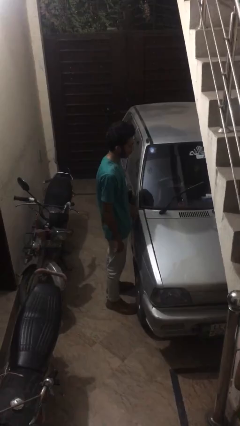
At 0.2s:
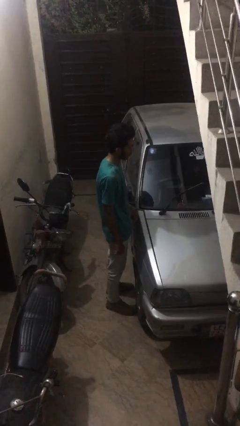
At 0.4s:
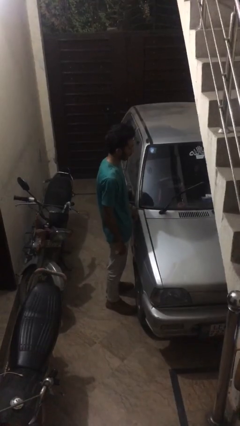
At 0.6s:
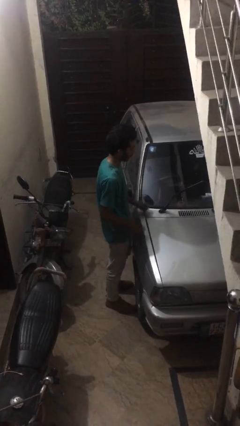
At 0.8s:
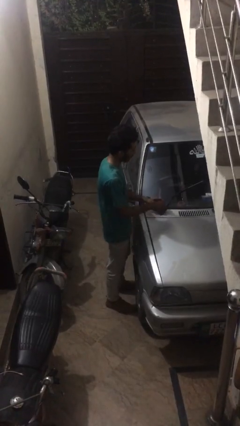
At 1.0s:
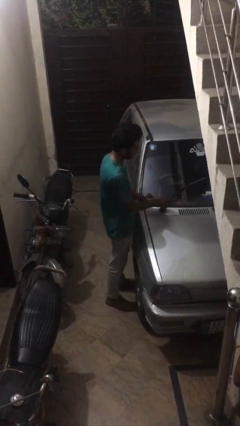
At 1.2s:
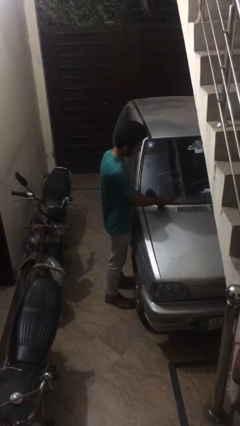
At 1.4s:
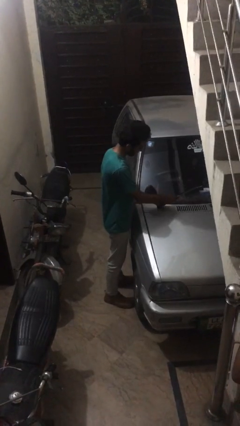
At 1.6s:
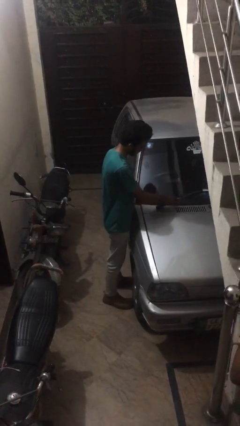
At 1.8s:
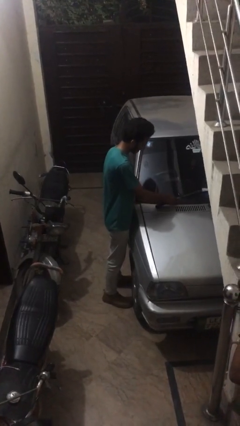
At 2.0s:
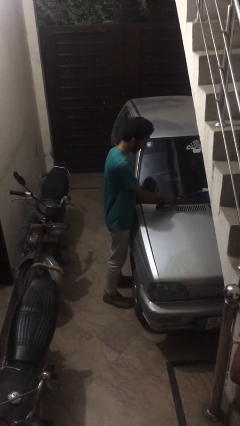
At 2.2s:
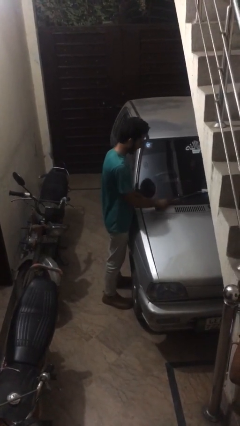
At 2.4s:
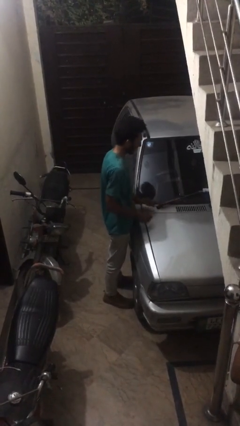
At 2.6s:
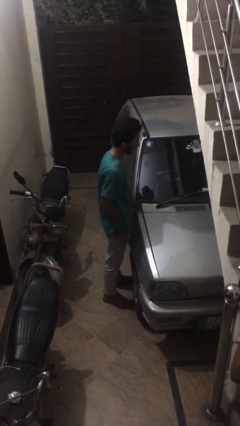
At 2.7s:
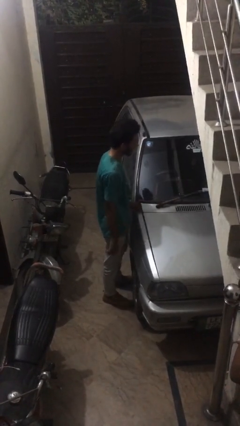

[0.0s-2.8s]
person flips down car wipers

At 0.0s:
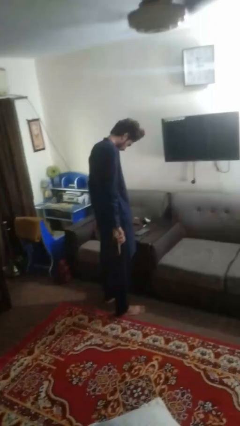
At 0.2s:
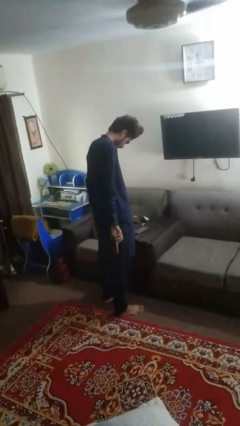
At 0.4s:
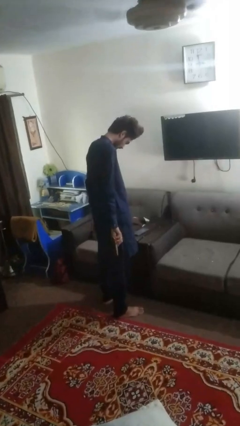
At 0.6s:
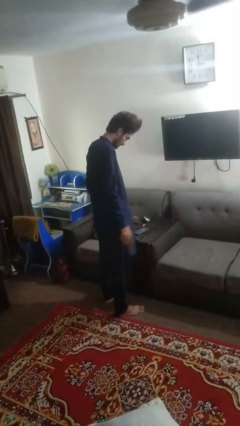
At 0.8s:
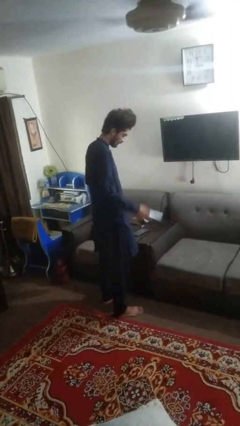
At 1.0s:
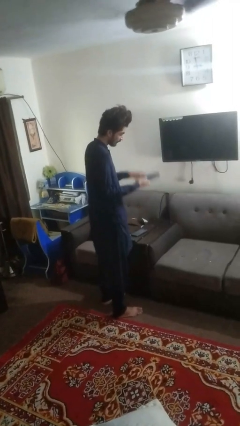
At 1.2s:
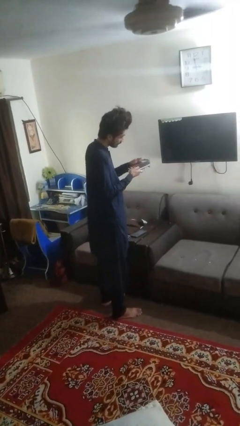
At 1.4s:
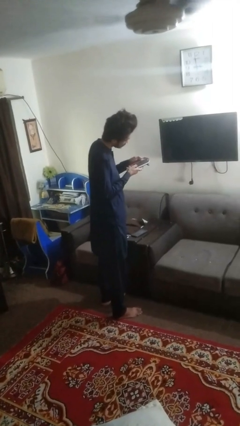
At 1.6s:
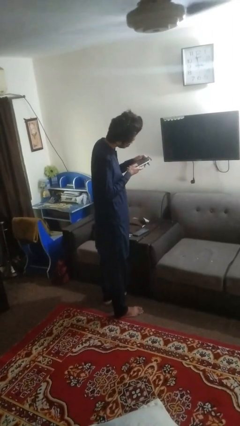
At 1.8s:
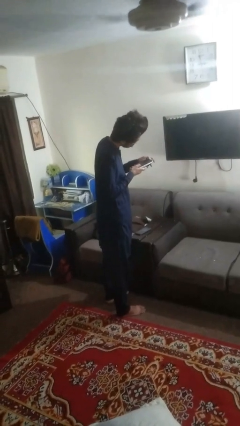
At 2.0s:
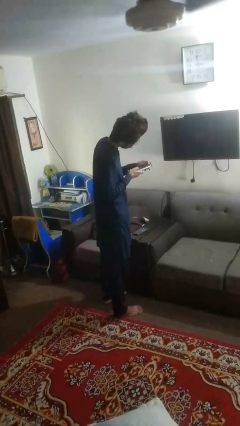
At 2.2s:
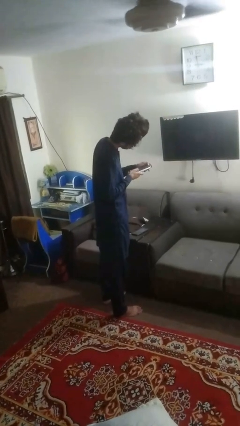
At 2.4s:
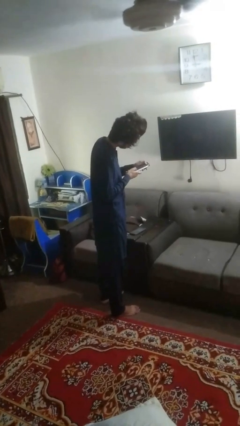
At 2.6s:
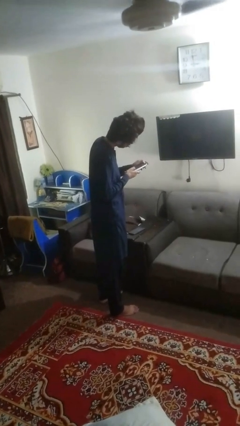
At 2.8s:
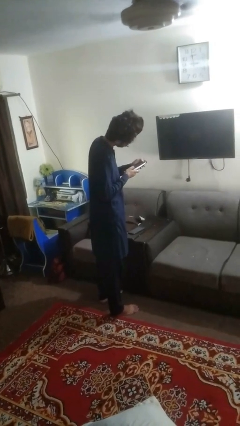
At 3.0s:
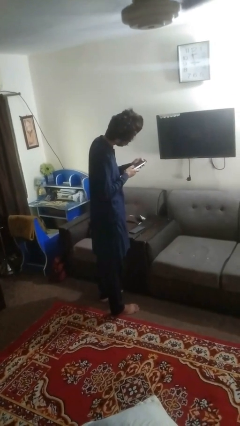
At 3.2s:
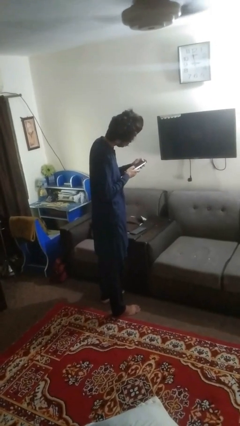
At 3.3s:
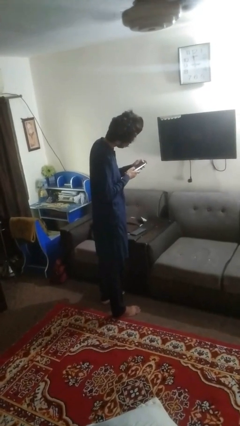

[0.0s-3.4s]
person uses television remote

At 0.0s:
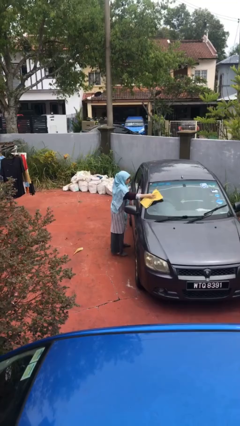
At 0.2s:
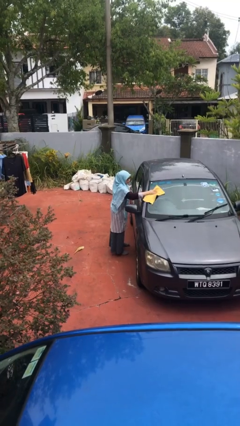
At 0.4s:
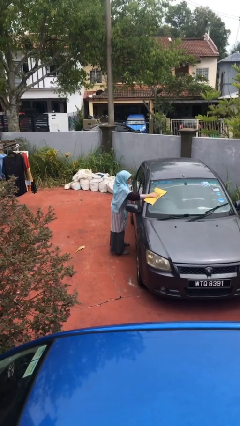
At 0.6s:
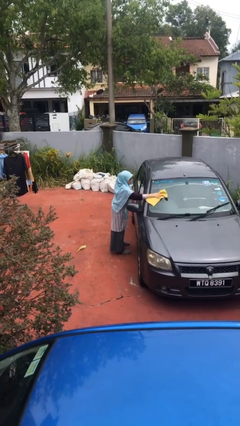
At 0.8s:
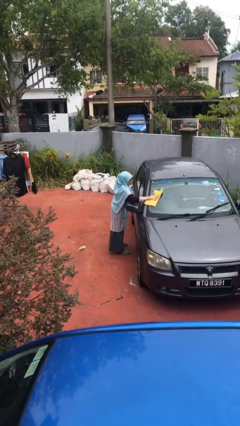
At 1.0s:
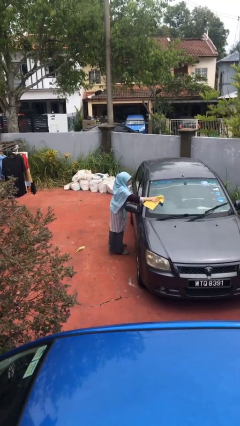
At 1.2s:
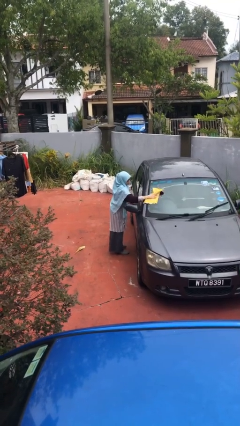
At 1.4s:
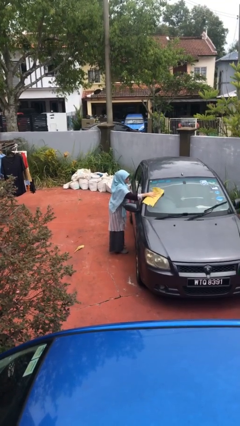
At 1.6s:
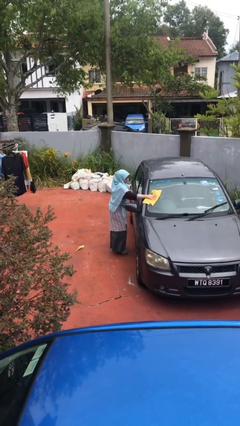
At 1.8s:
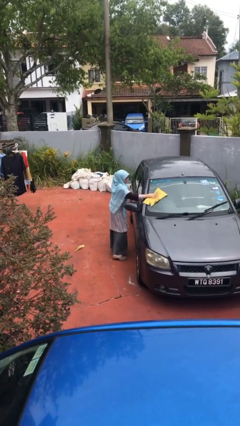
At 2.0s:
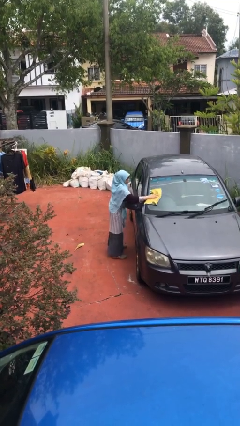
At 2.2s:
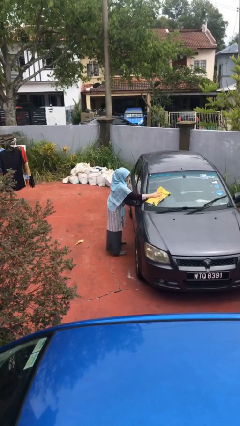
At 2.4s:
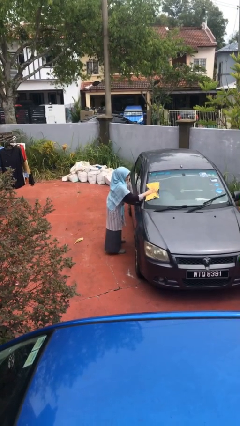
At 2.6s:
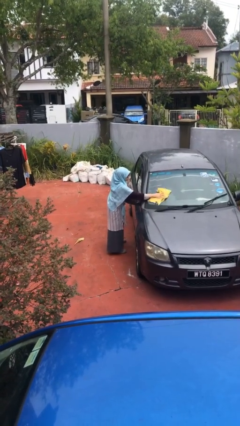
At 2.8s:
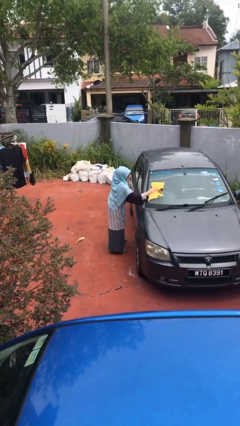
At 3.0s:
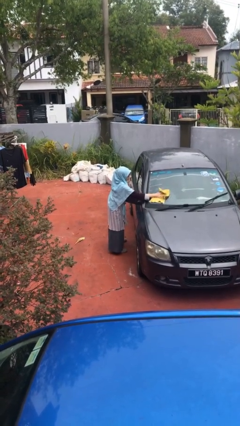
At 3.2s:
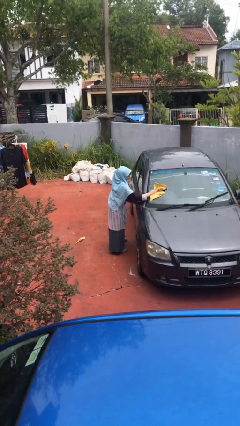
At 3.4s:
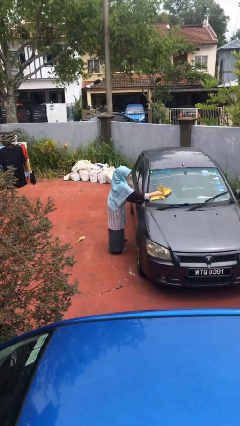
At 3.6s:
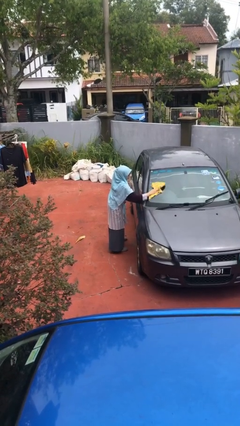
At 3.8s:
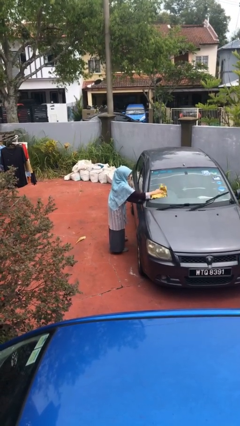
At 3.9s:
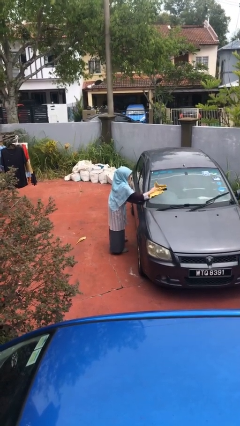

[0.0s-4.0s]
person polishes car with rag

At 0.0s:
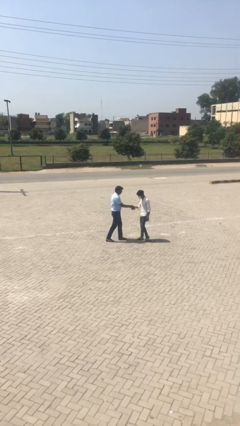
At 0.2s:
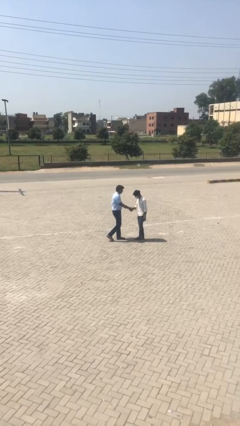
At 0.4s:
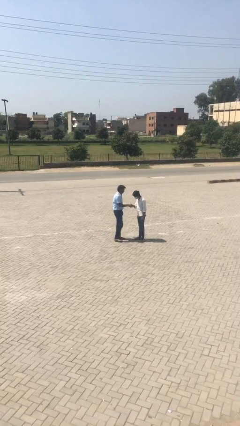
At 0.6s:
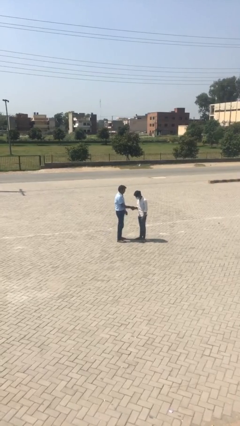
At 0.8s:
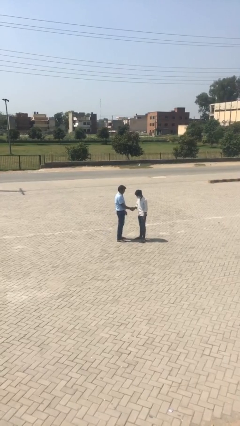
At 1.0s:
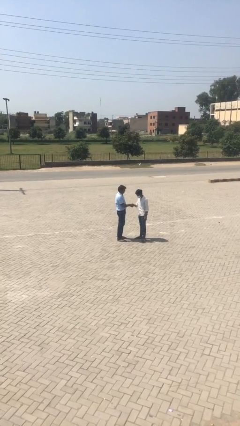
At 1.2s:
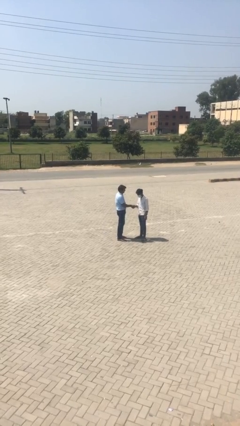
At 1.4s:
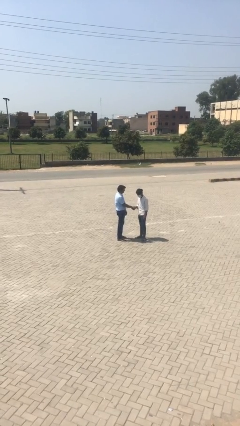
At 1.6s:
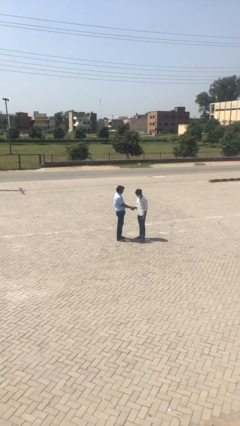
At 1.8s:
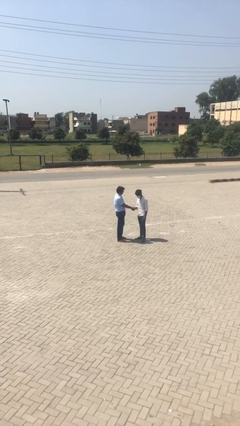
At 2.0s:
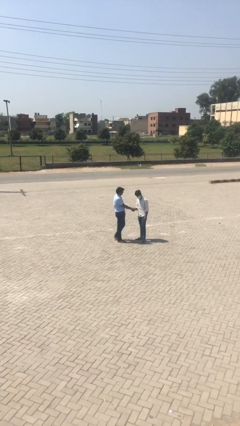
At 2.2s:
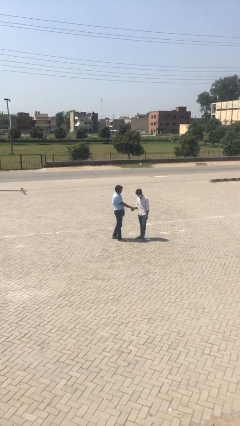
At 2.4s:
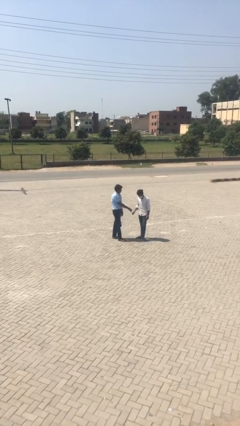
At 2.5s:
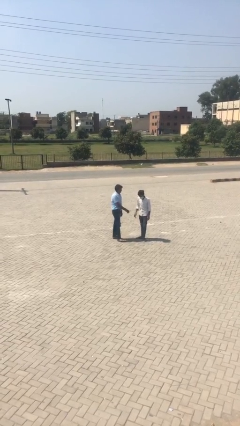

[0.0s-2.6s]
person shakes hand

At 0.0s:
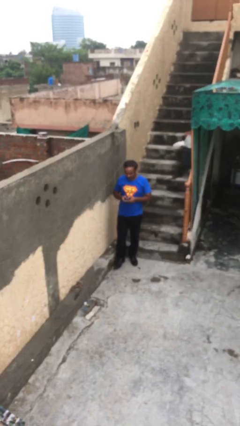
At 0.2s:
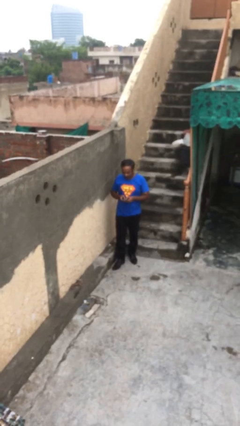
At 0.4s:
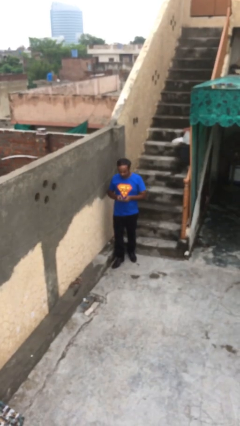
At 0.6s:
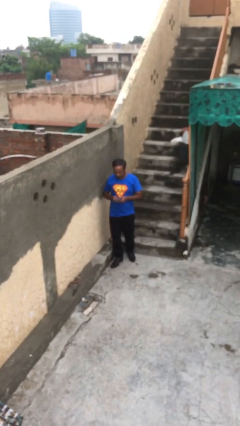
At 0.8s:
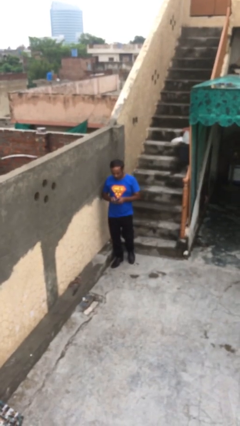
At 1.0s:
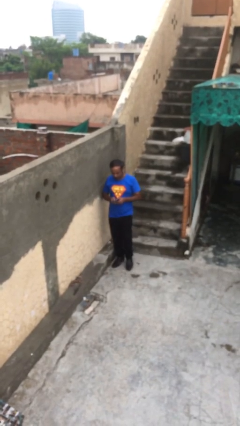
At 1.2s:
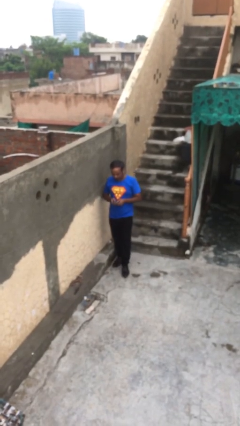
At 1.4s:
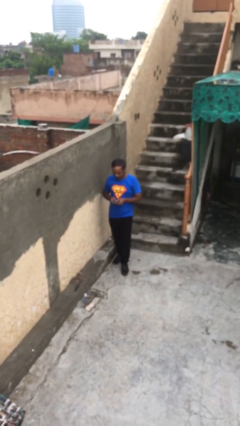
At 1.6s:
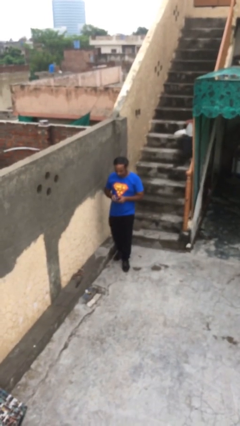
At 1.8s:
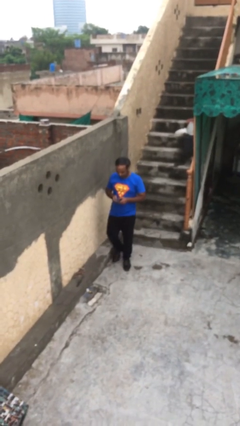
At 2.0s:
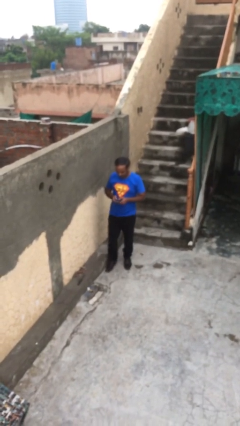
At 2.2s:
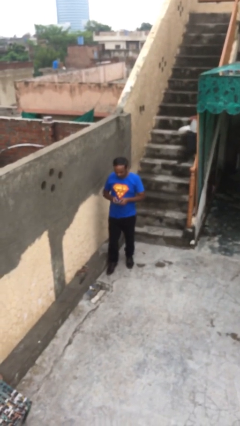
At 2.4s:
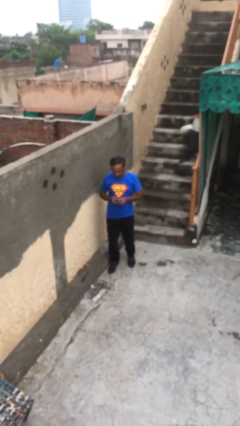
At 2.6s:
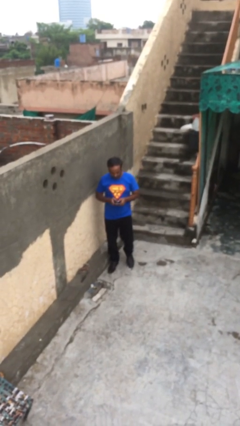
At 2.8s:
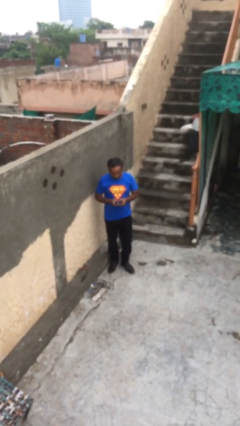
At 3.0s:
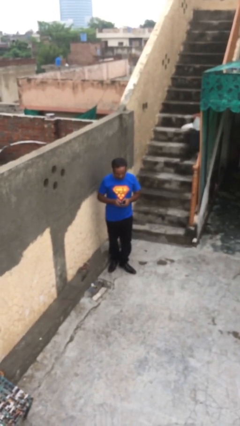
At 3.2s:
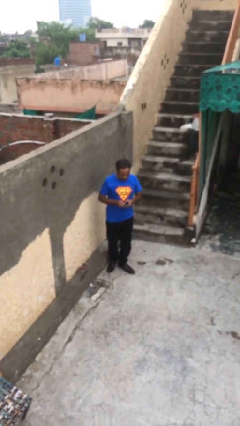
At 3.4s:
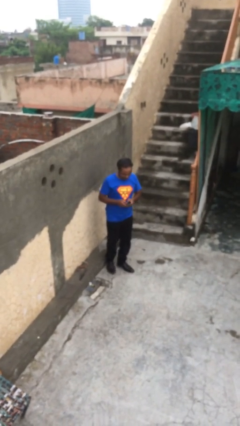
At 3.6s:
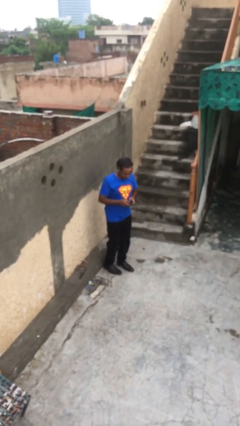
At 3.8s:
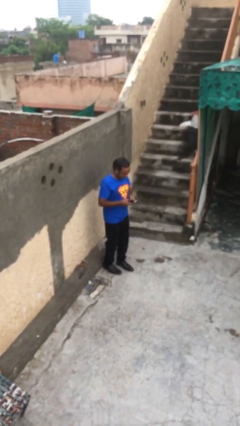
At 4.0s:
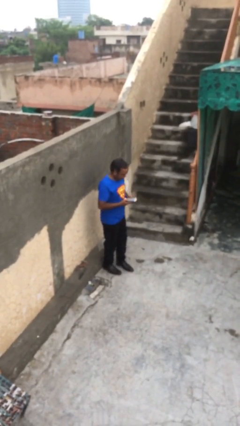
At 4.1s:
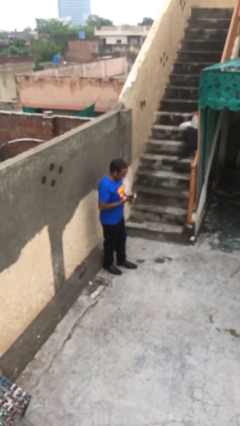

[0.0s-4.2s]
person texts on phone

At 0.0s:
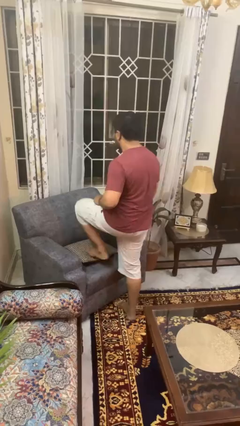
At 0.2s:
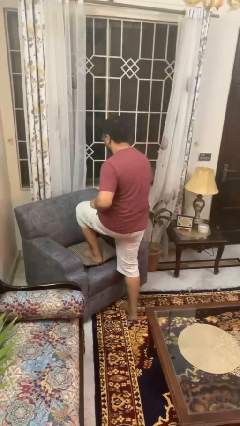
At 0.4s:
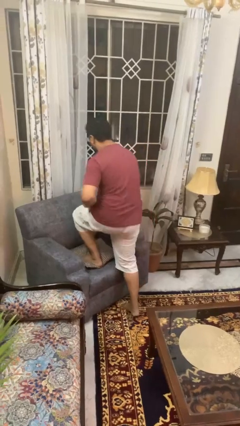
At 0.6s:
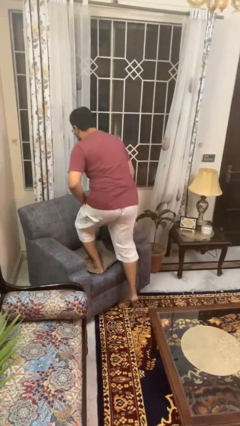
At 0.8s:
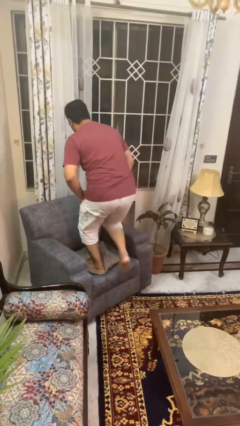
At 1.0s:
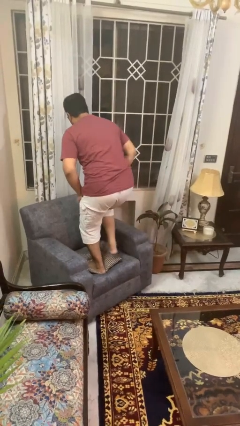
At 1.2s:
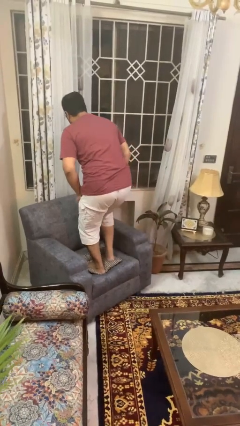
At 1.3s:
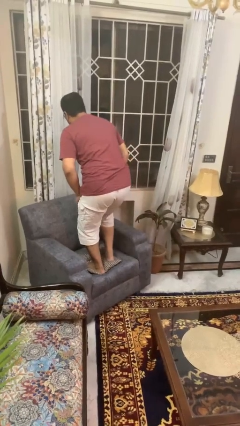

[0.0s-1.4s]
person climbs on couch
